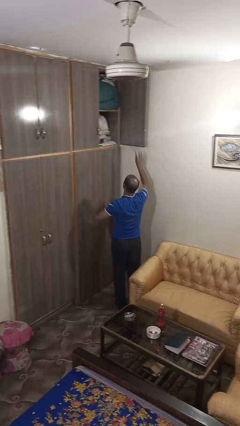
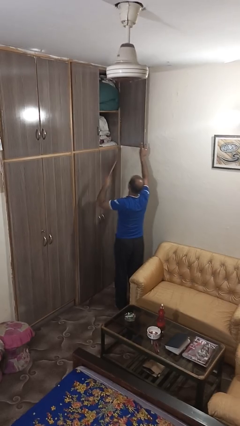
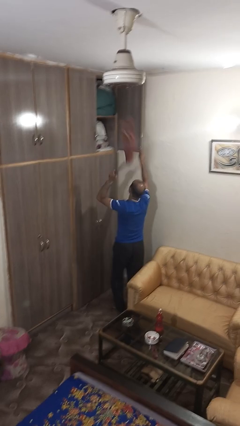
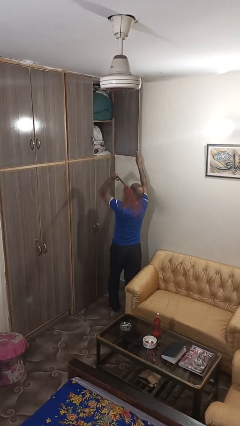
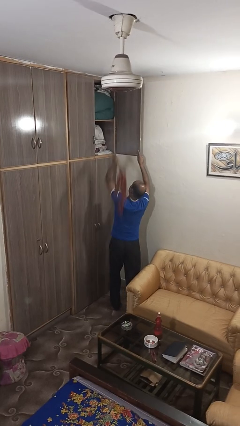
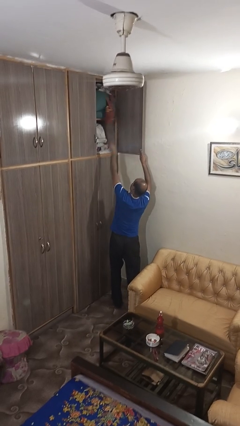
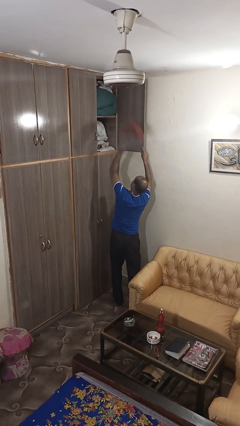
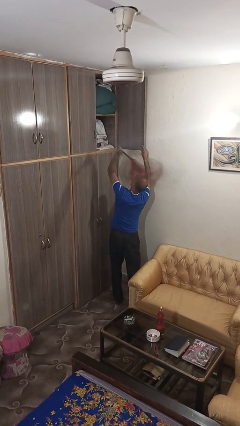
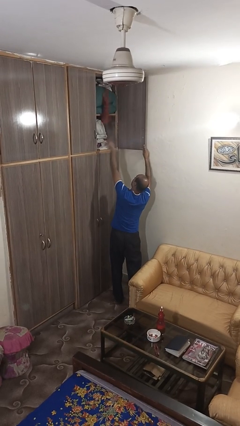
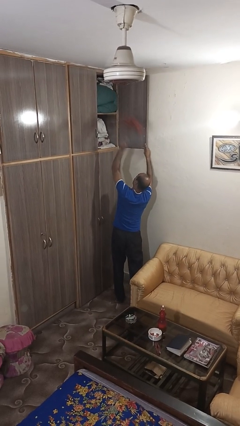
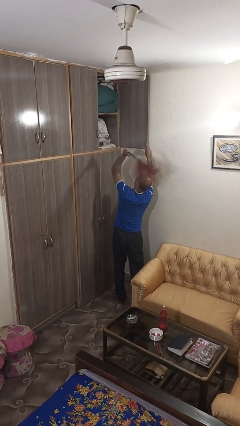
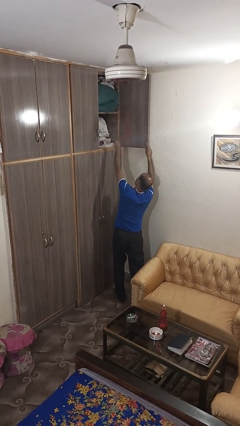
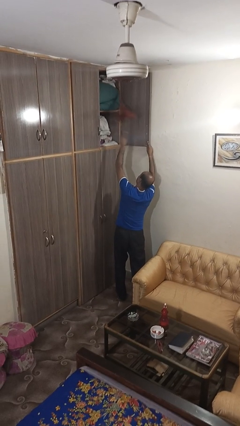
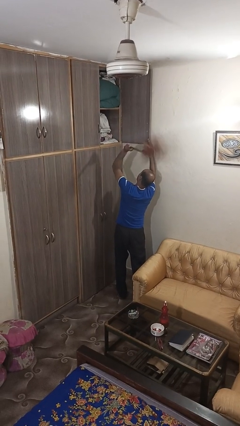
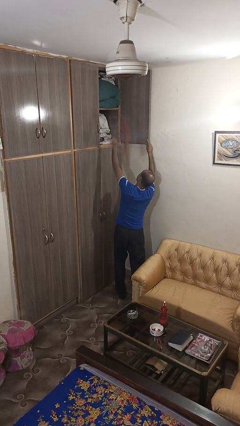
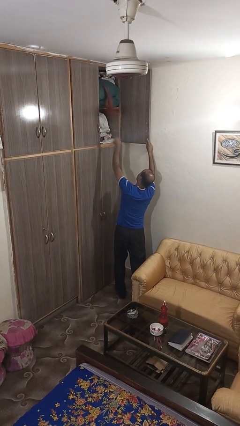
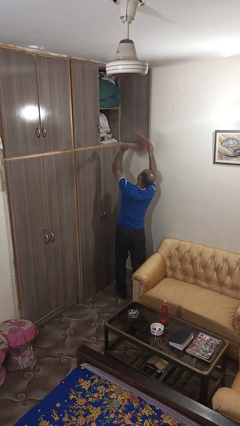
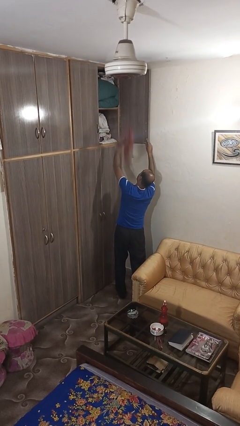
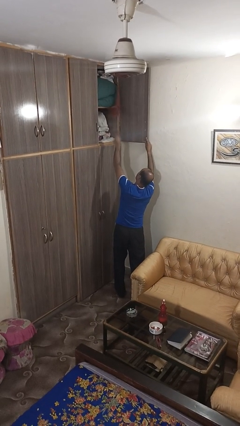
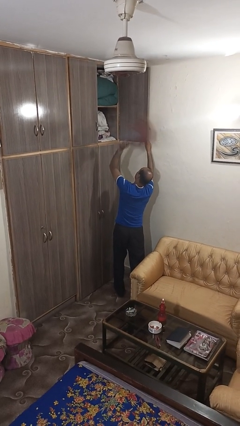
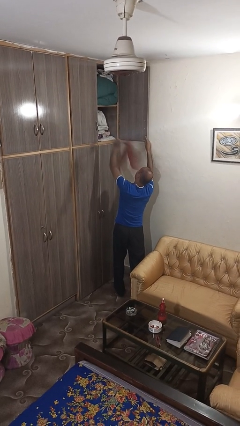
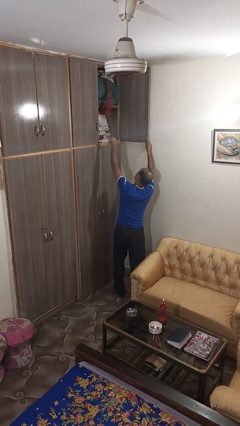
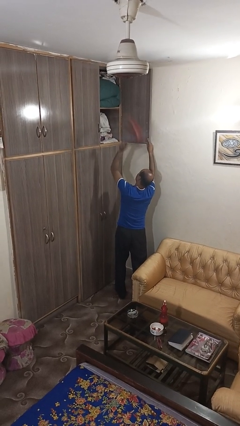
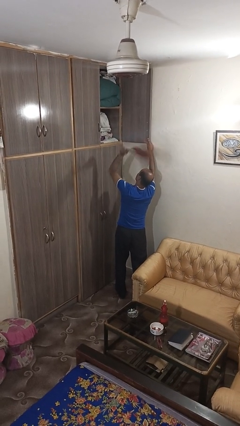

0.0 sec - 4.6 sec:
person dusts furniture

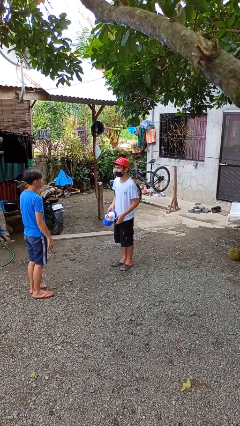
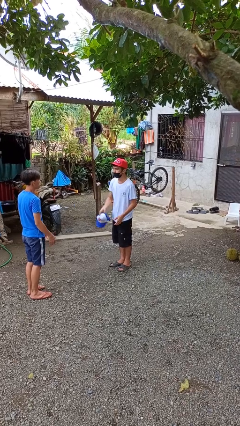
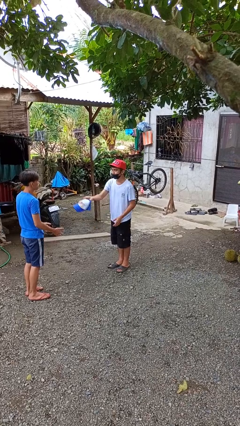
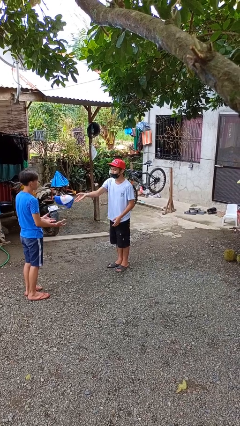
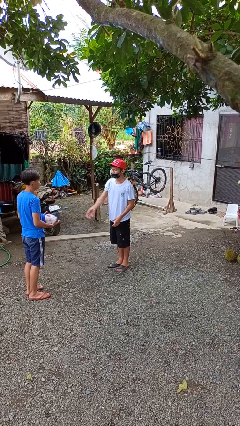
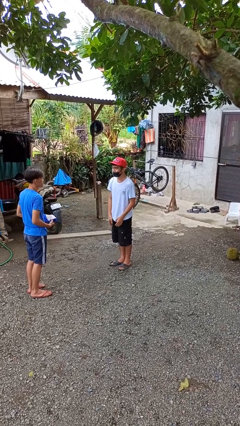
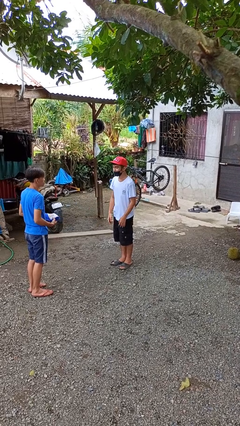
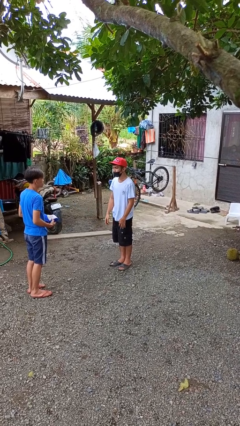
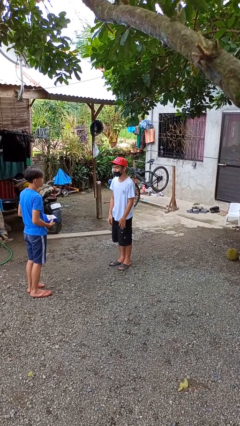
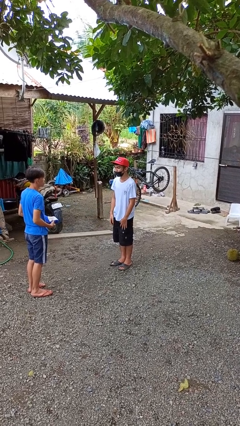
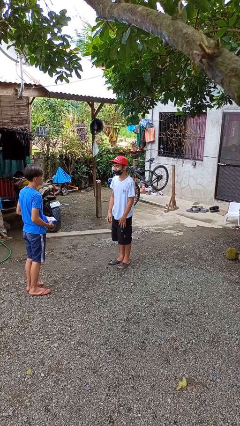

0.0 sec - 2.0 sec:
person throws object to person

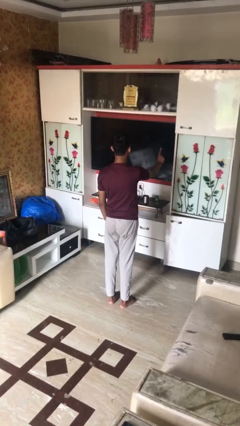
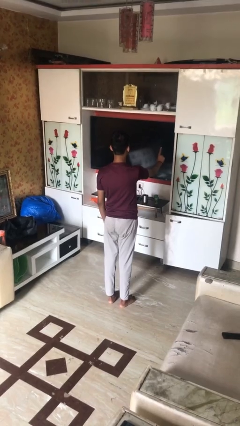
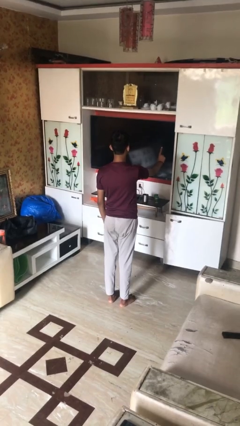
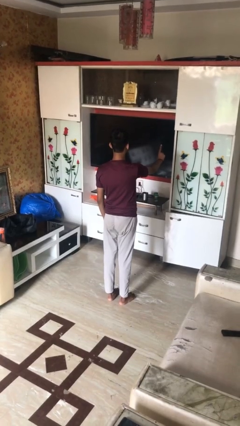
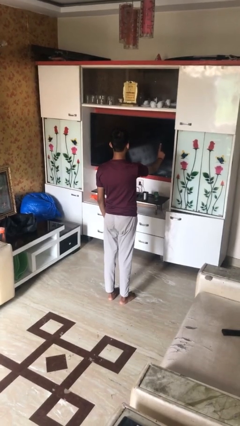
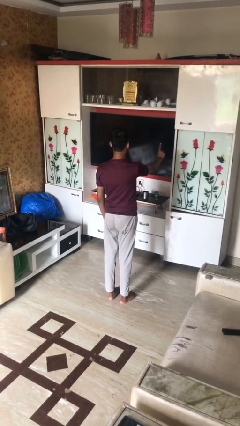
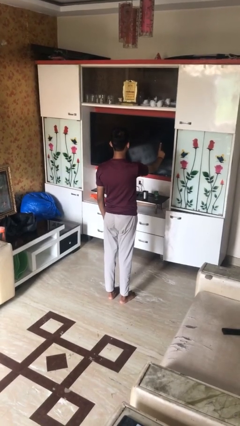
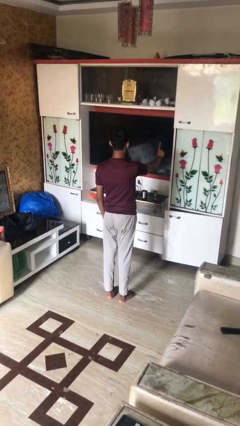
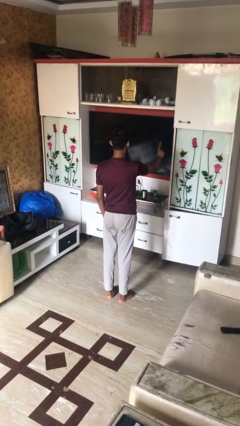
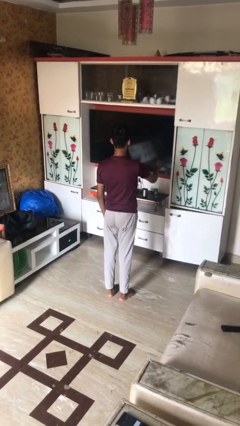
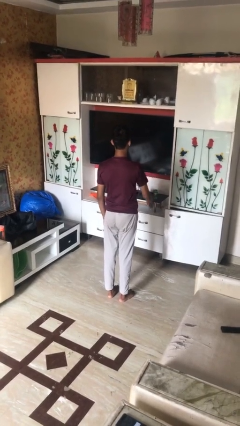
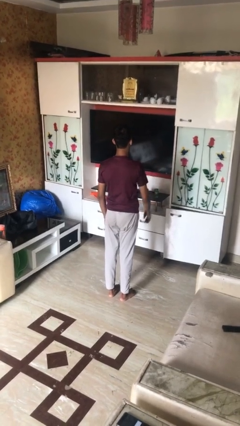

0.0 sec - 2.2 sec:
person gestures number one

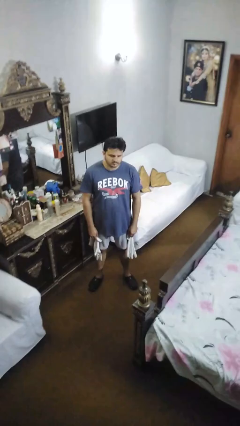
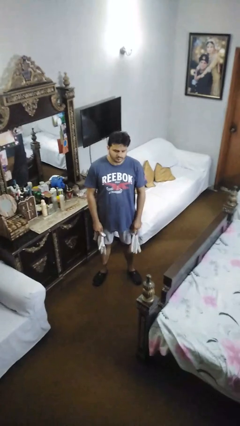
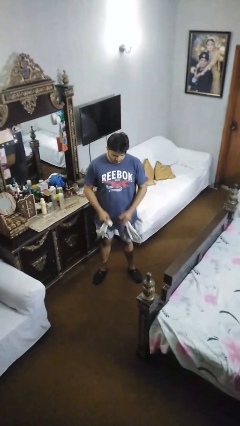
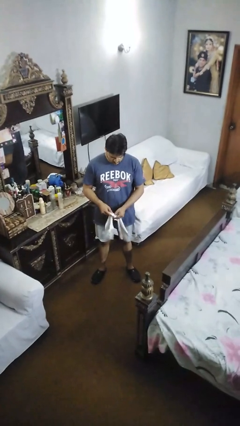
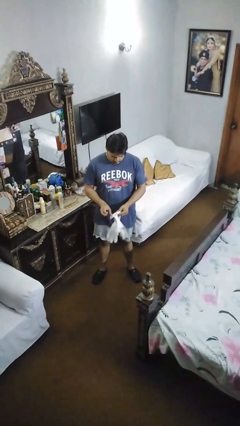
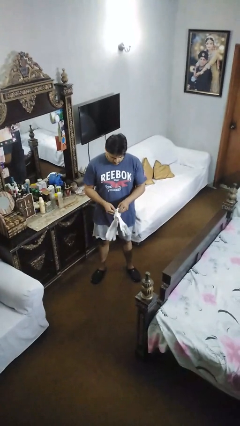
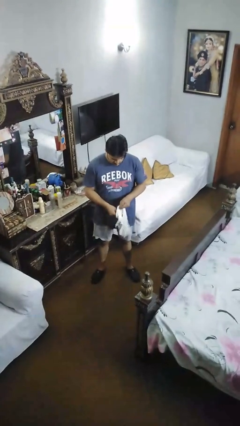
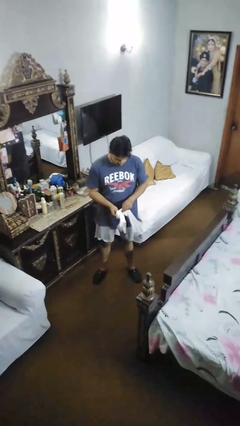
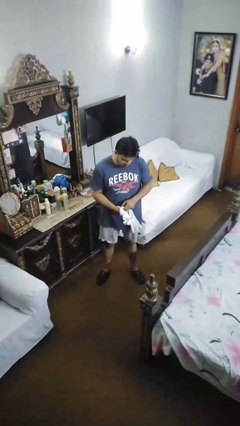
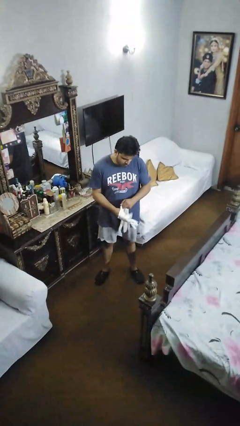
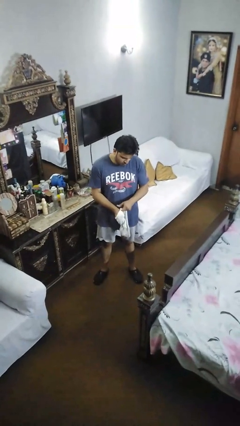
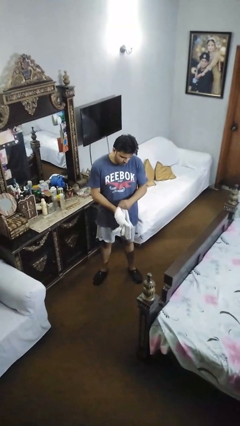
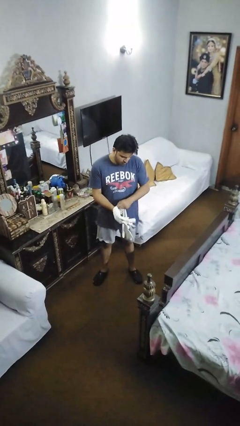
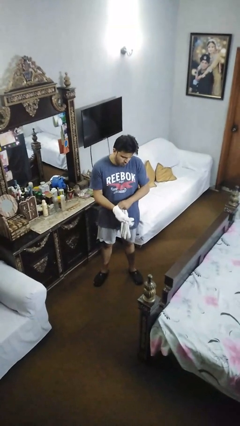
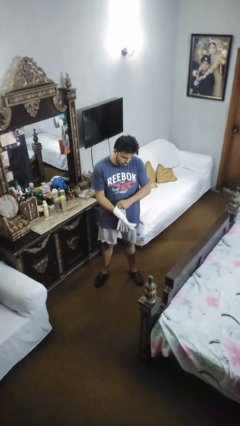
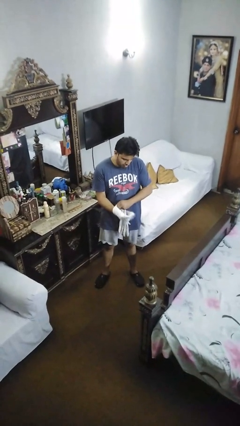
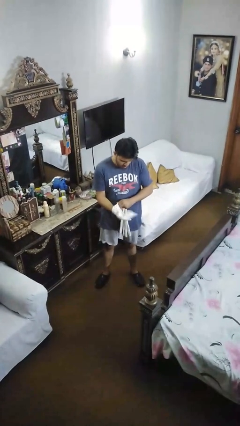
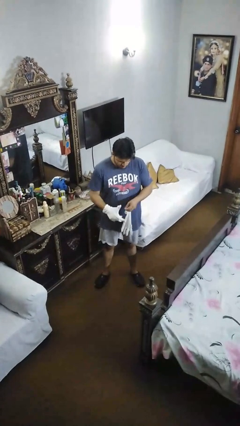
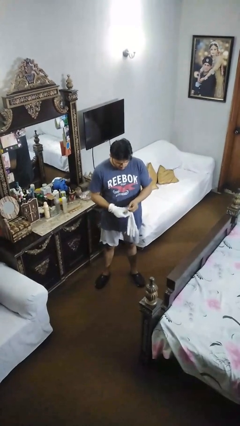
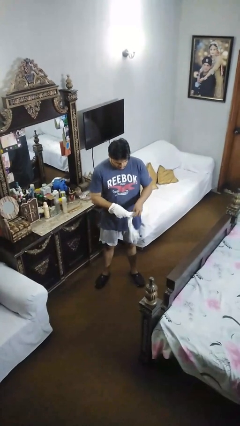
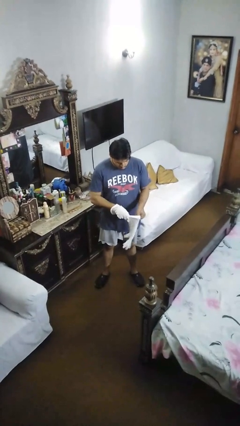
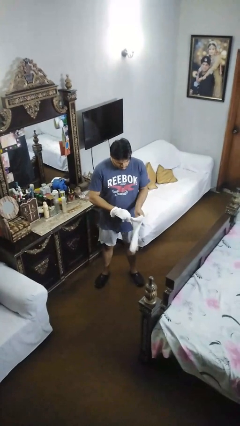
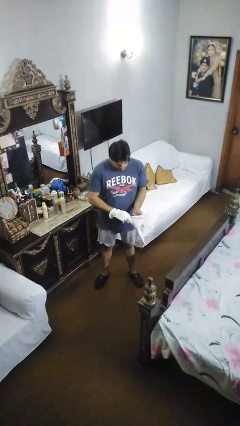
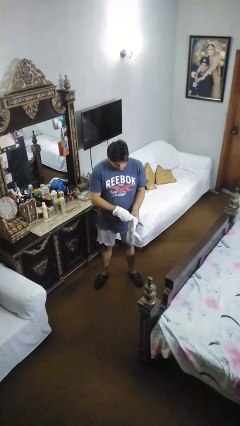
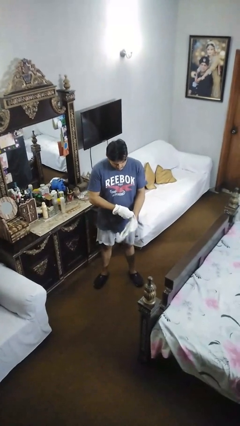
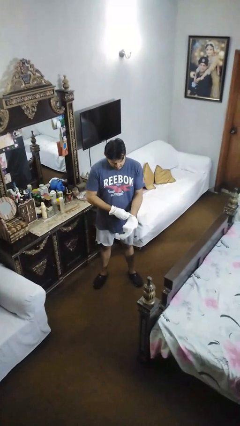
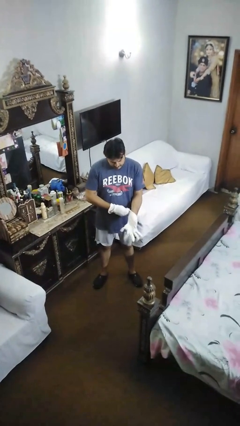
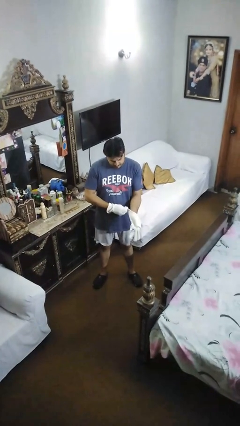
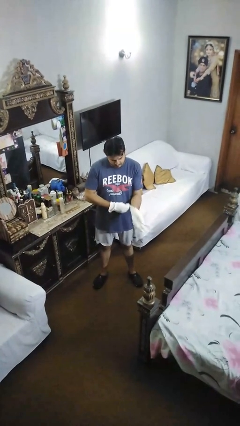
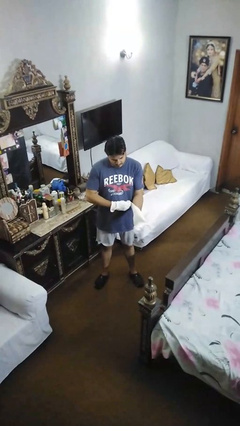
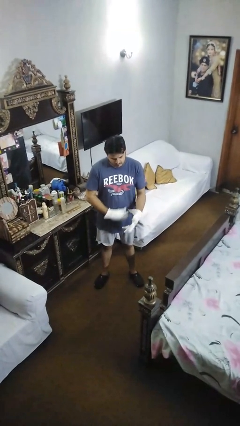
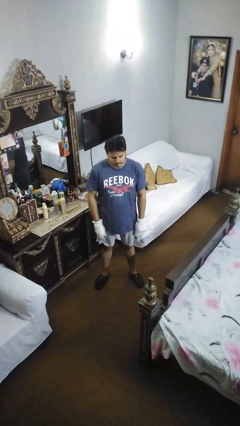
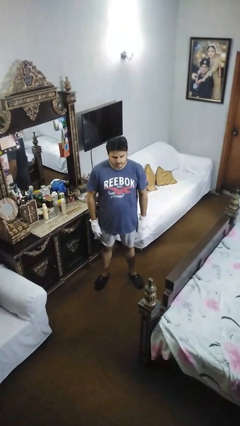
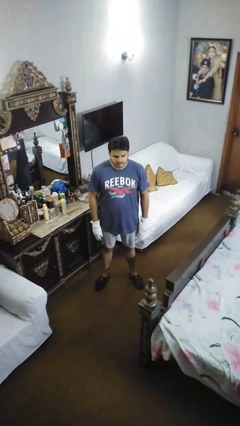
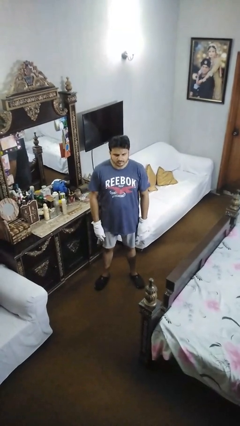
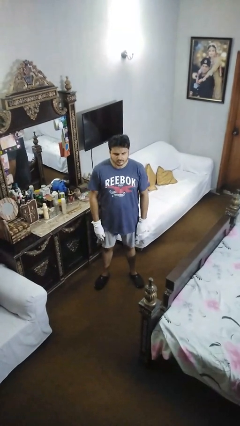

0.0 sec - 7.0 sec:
person puts on gloves

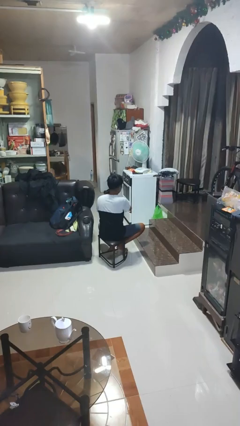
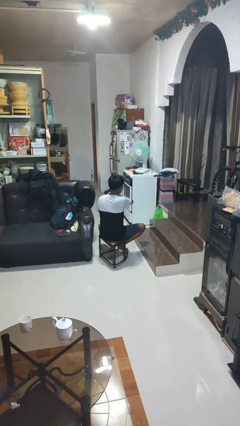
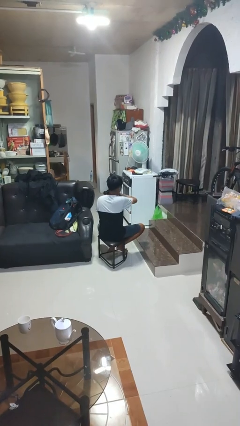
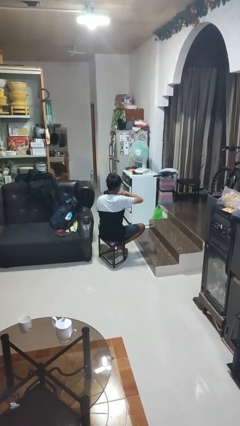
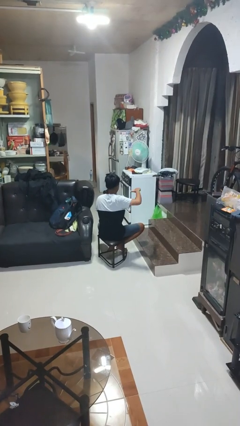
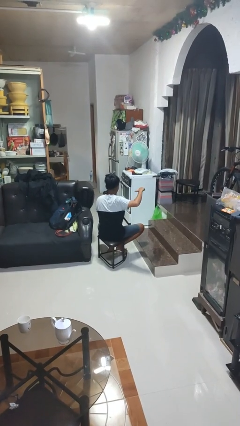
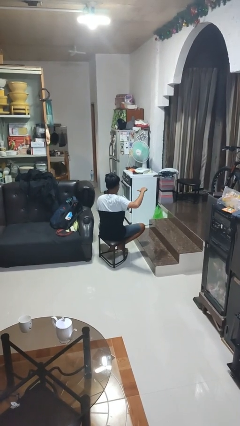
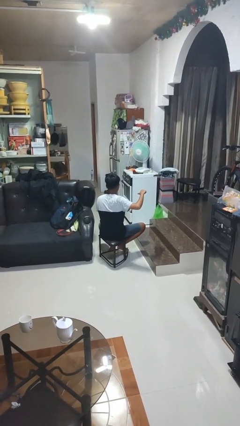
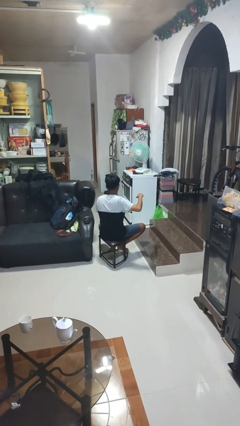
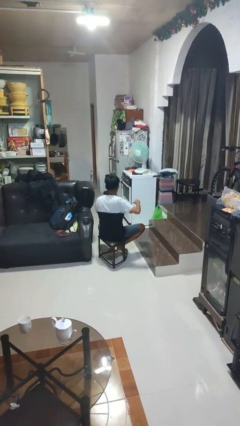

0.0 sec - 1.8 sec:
person gestures cut
